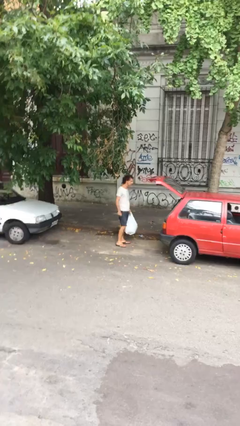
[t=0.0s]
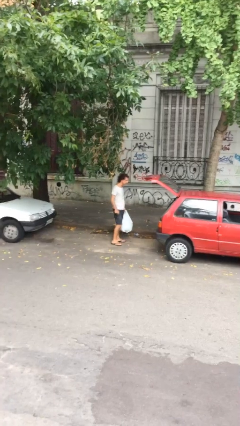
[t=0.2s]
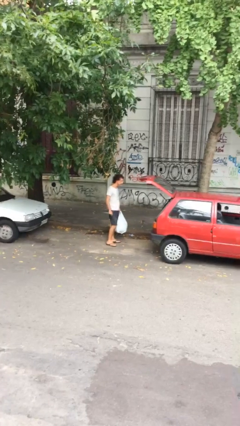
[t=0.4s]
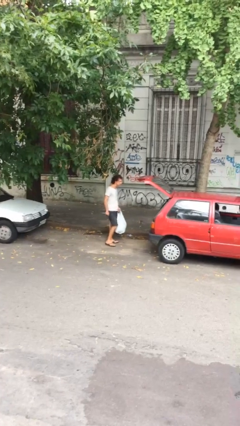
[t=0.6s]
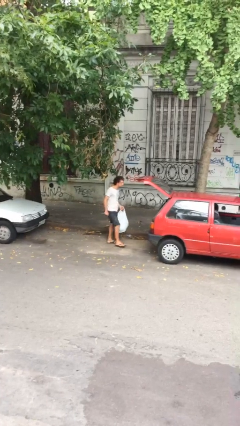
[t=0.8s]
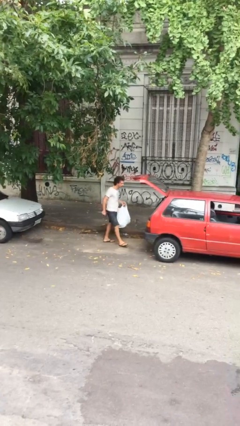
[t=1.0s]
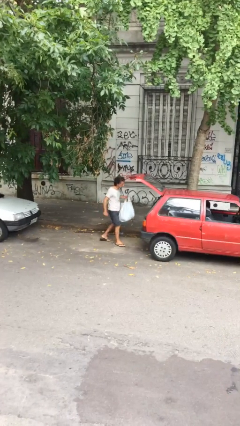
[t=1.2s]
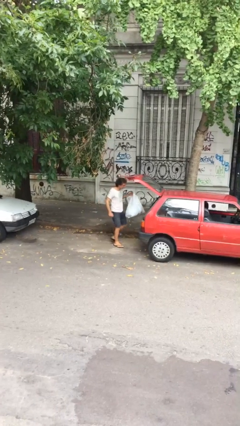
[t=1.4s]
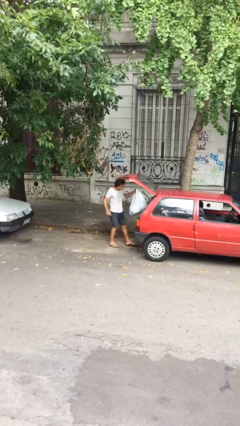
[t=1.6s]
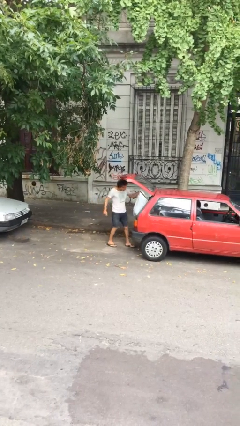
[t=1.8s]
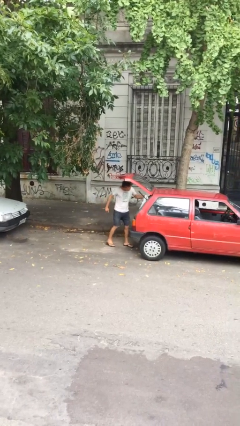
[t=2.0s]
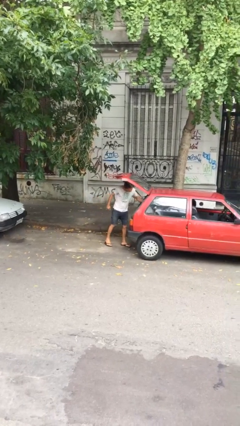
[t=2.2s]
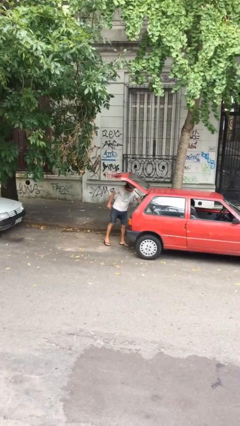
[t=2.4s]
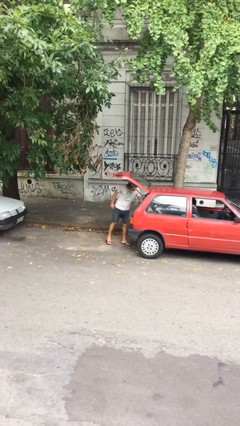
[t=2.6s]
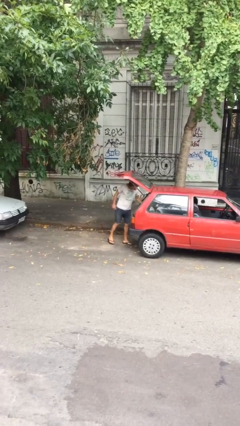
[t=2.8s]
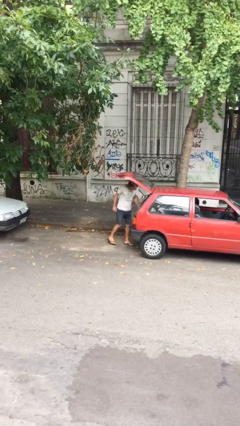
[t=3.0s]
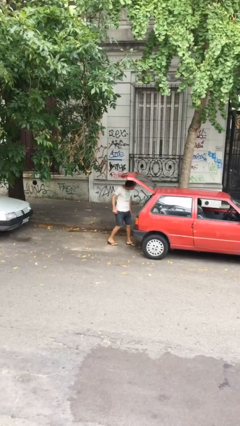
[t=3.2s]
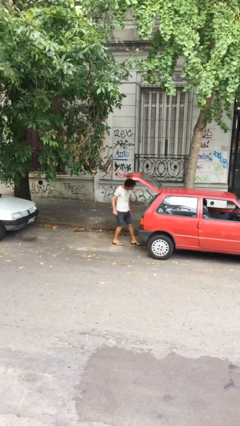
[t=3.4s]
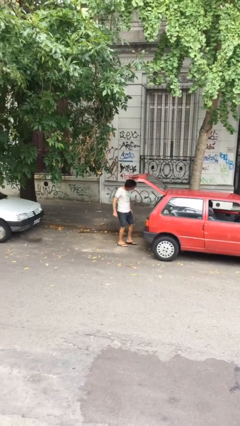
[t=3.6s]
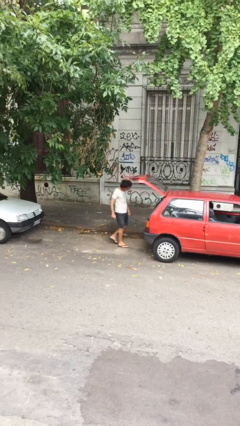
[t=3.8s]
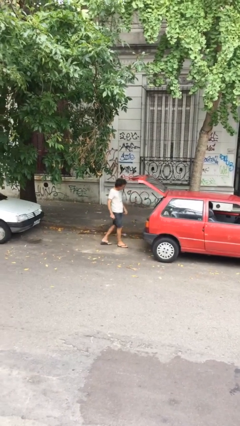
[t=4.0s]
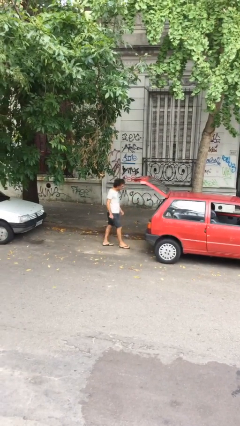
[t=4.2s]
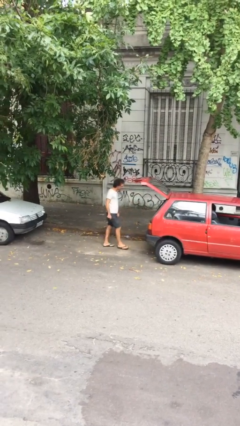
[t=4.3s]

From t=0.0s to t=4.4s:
person loads car

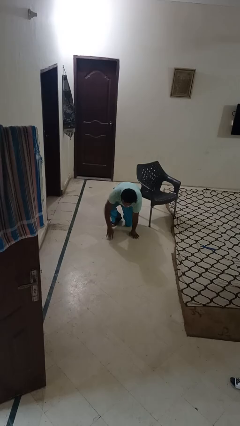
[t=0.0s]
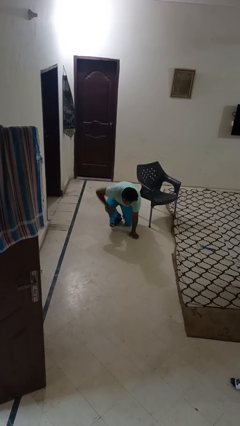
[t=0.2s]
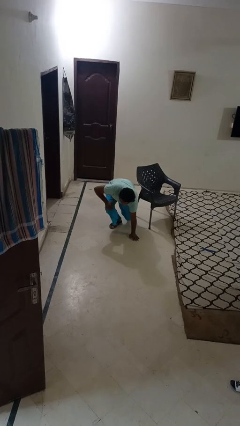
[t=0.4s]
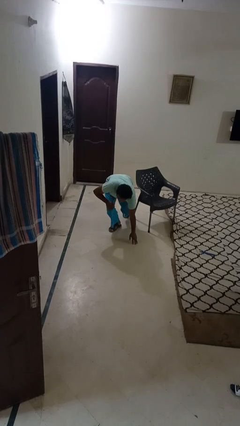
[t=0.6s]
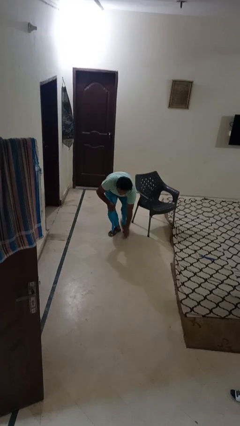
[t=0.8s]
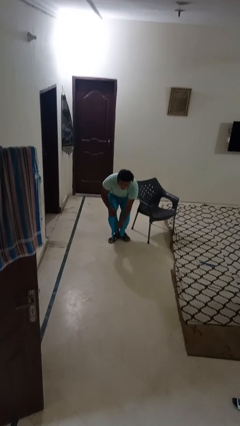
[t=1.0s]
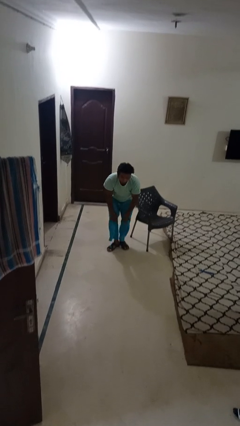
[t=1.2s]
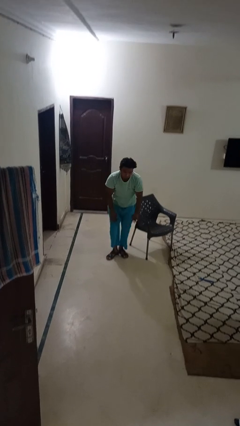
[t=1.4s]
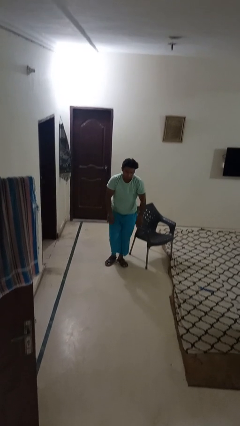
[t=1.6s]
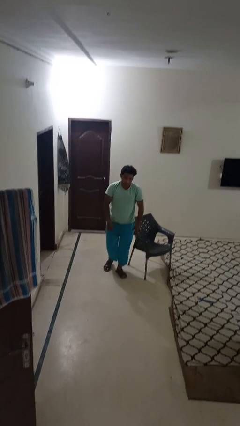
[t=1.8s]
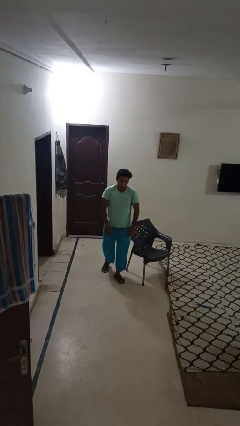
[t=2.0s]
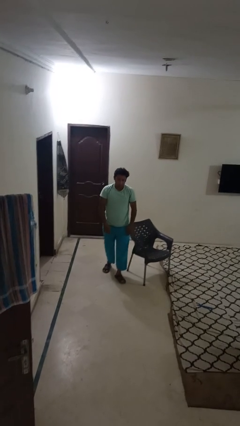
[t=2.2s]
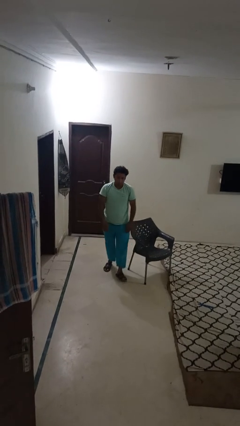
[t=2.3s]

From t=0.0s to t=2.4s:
person stands up from floor

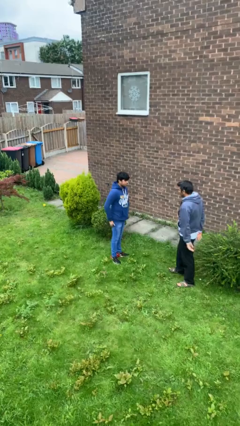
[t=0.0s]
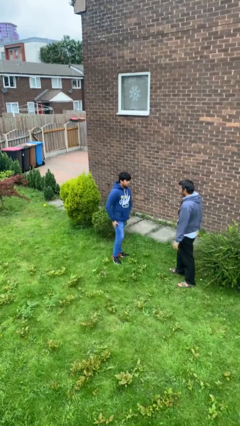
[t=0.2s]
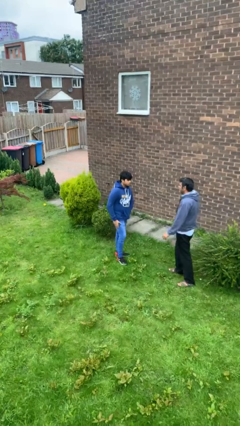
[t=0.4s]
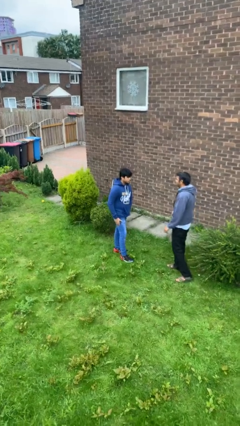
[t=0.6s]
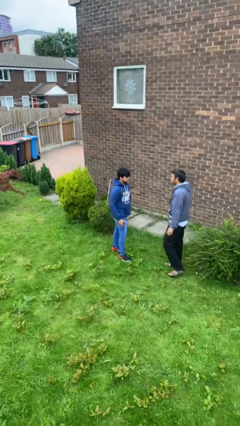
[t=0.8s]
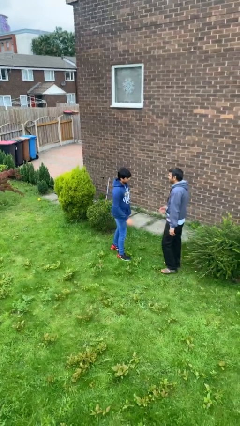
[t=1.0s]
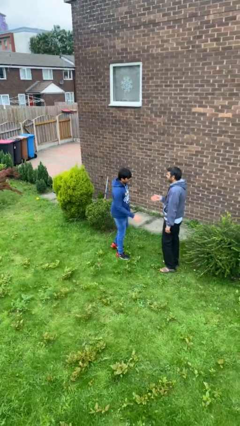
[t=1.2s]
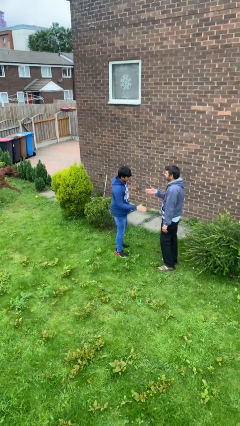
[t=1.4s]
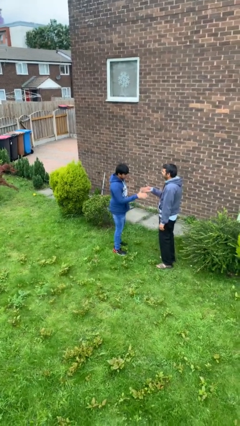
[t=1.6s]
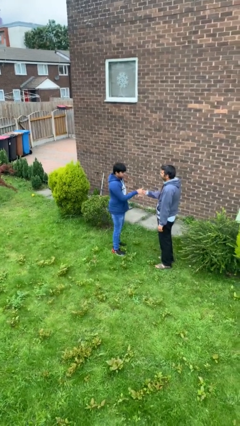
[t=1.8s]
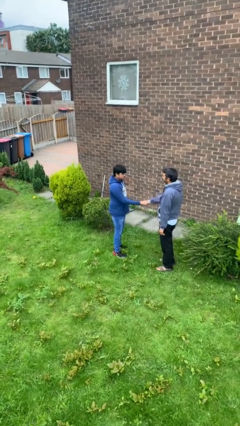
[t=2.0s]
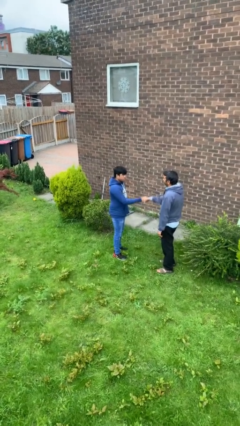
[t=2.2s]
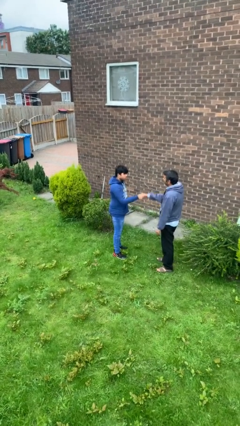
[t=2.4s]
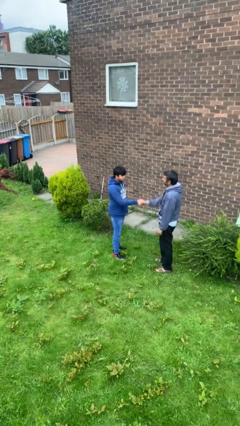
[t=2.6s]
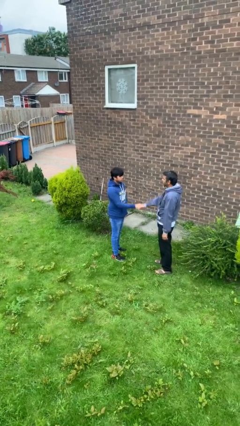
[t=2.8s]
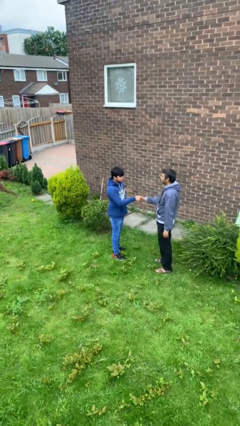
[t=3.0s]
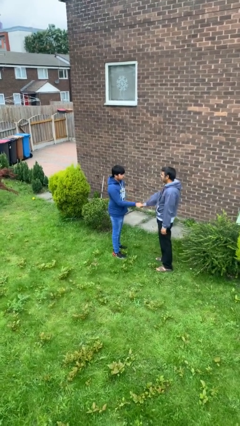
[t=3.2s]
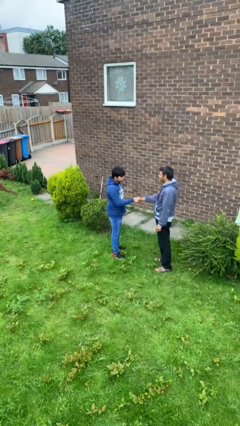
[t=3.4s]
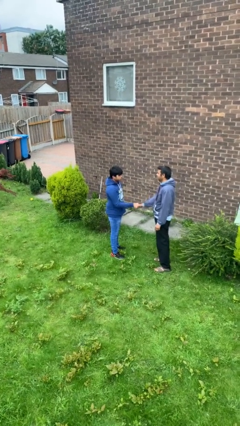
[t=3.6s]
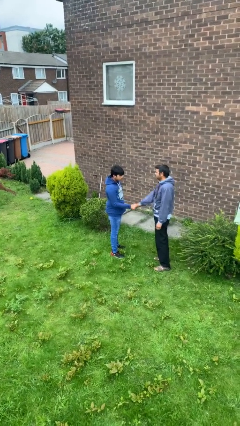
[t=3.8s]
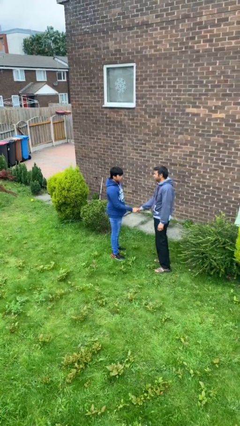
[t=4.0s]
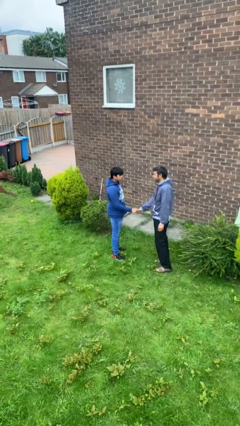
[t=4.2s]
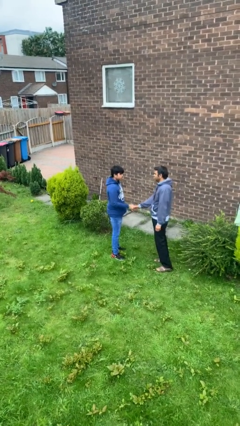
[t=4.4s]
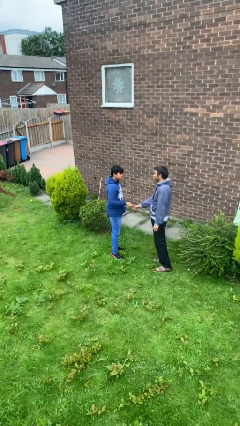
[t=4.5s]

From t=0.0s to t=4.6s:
person shakes hand

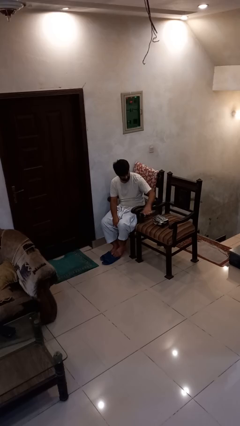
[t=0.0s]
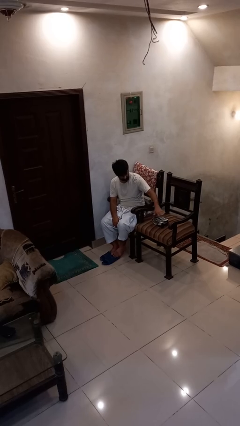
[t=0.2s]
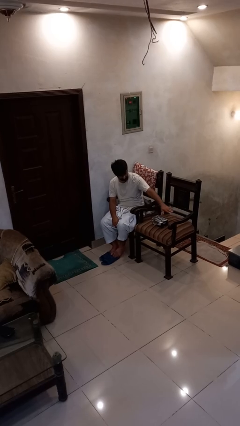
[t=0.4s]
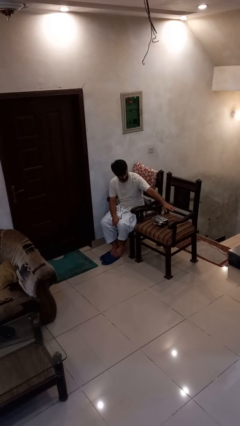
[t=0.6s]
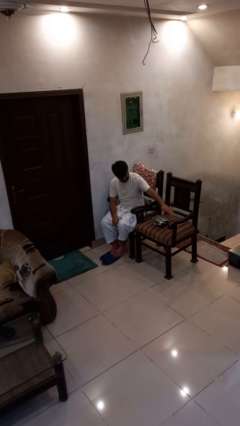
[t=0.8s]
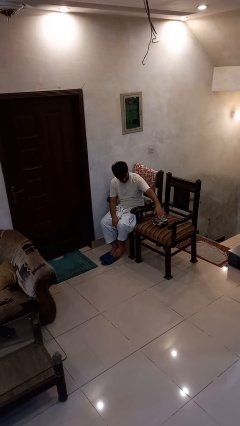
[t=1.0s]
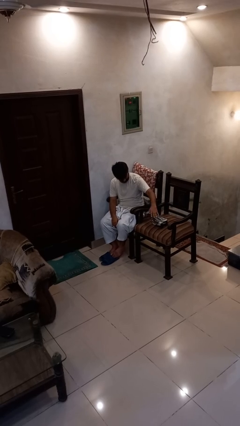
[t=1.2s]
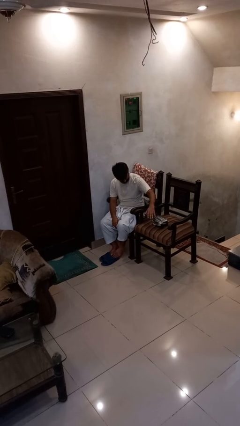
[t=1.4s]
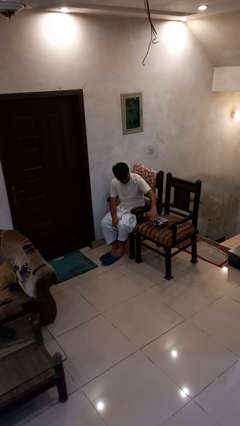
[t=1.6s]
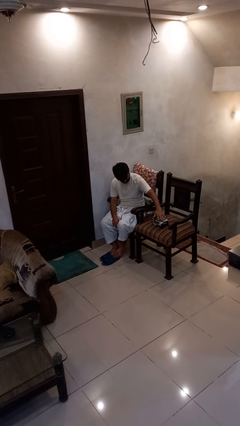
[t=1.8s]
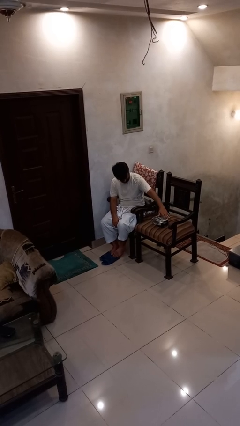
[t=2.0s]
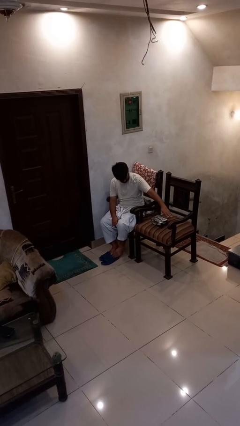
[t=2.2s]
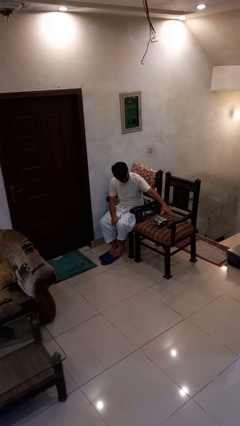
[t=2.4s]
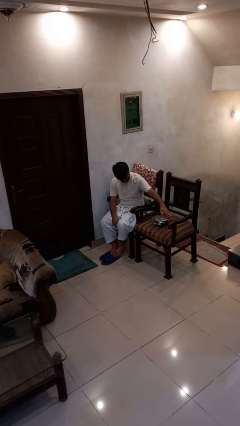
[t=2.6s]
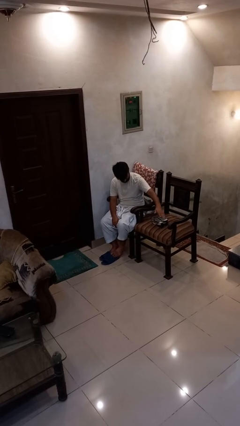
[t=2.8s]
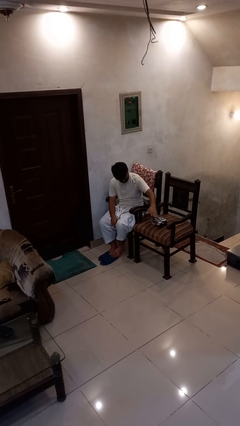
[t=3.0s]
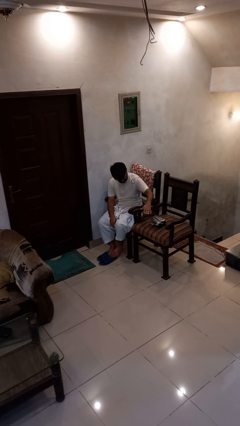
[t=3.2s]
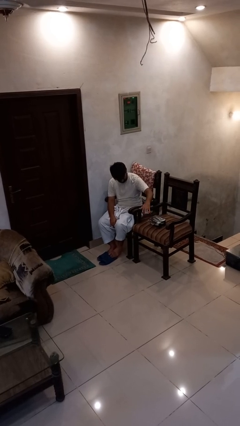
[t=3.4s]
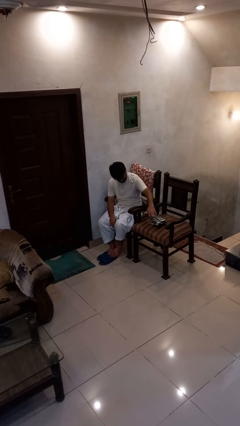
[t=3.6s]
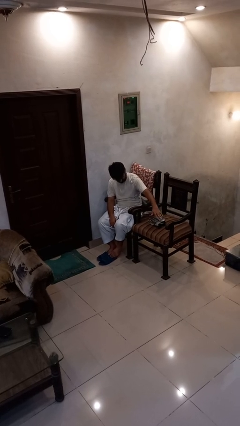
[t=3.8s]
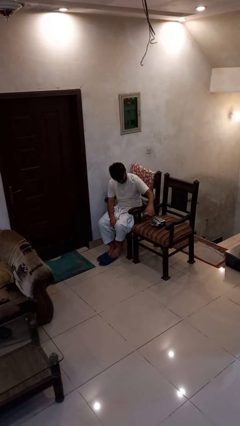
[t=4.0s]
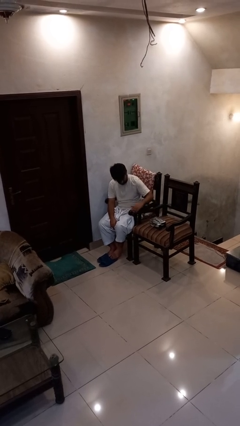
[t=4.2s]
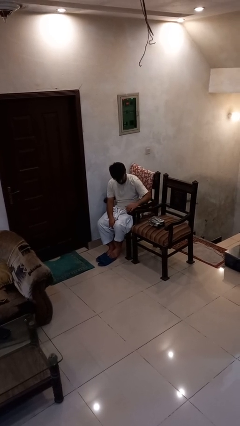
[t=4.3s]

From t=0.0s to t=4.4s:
person waves hand over object

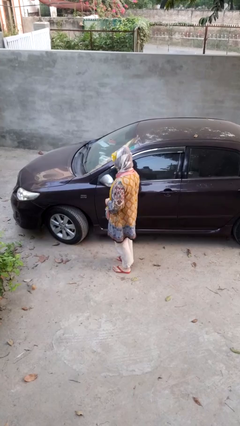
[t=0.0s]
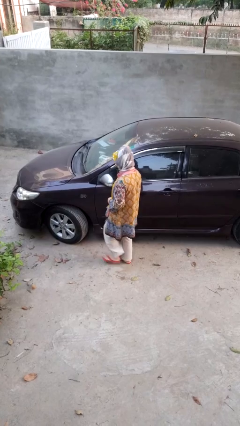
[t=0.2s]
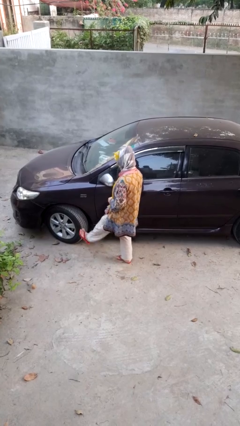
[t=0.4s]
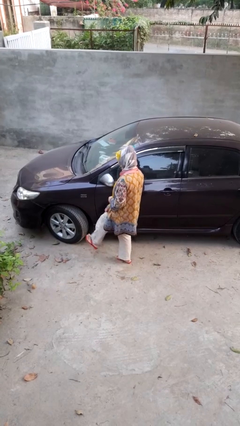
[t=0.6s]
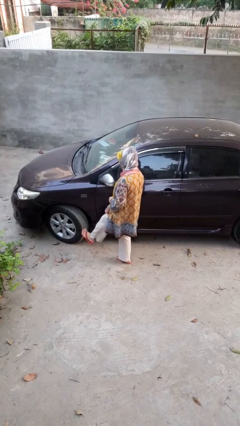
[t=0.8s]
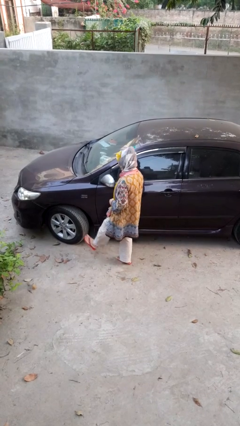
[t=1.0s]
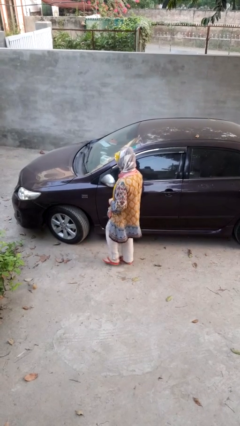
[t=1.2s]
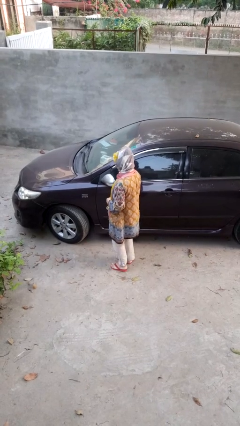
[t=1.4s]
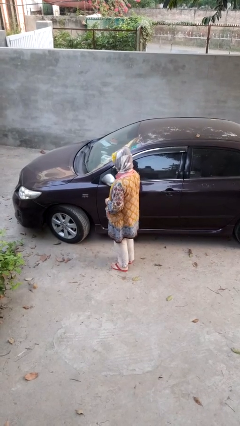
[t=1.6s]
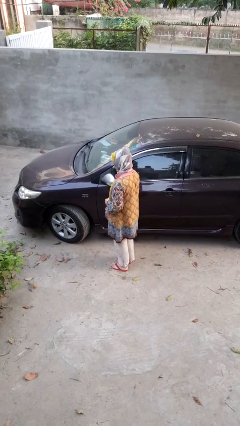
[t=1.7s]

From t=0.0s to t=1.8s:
person kicks car tires
